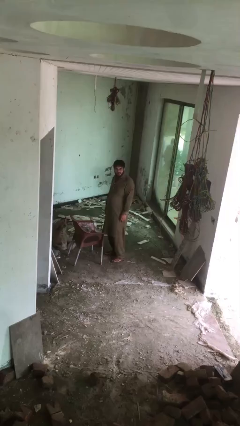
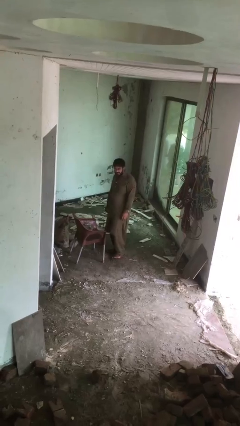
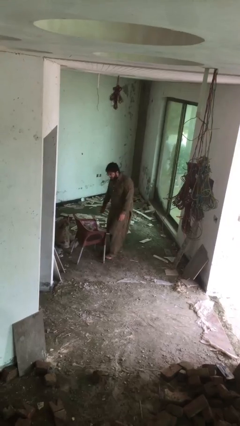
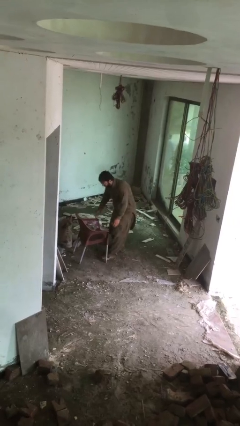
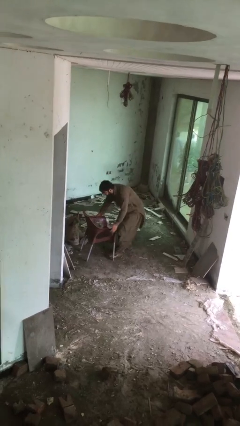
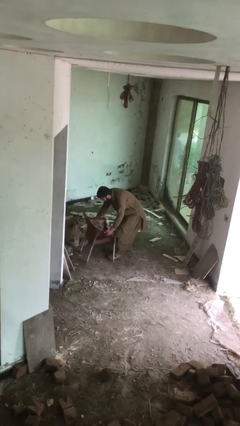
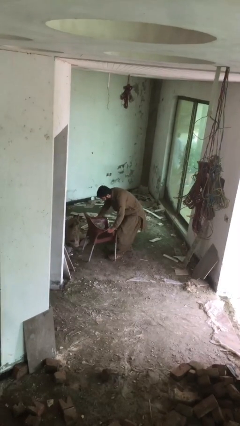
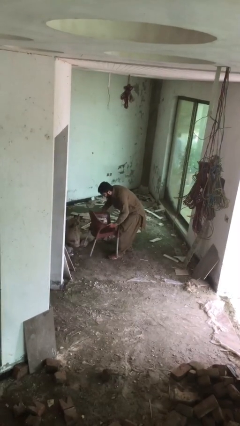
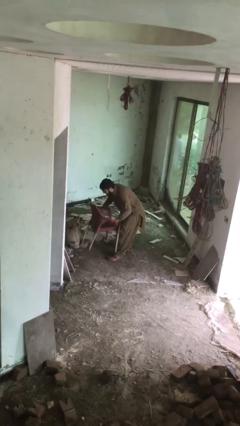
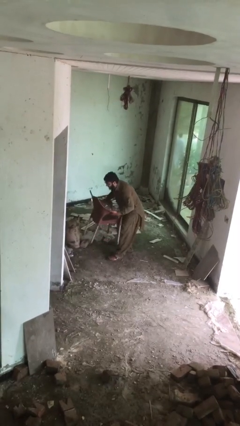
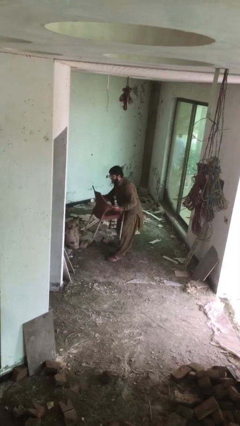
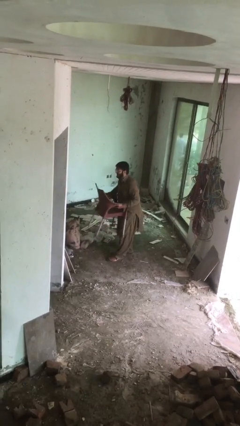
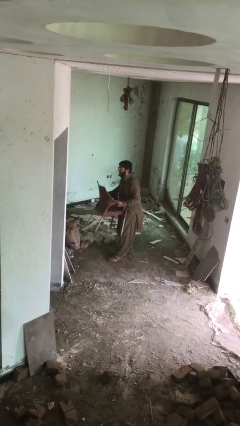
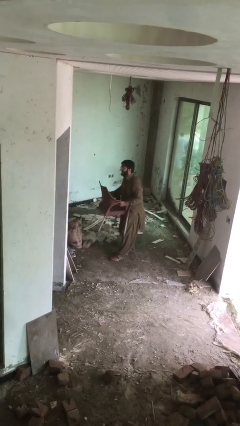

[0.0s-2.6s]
person picks up object from floor

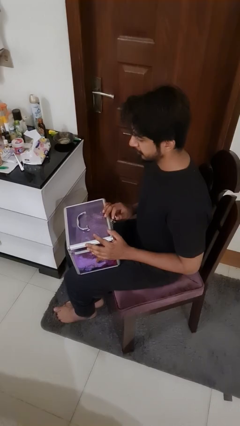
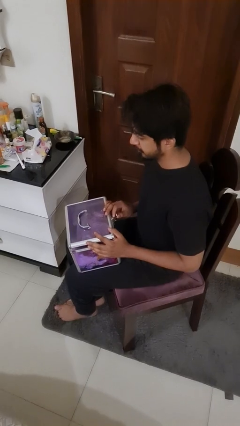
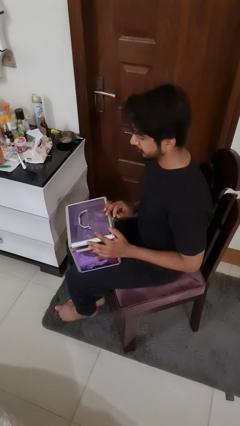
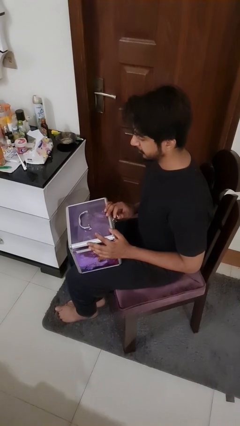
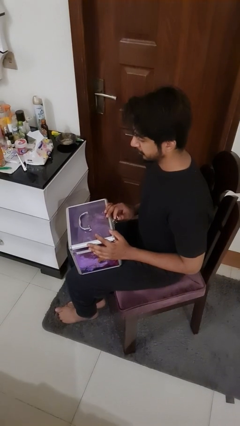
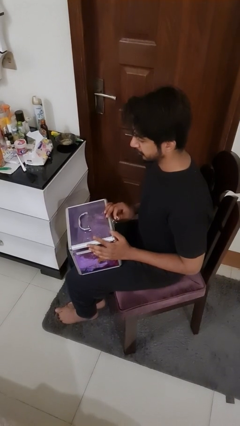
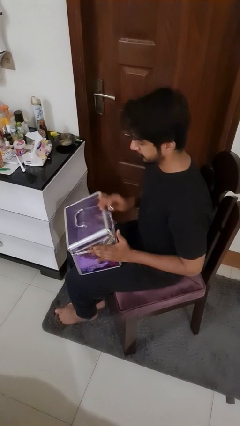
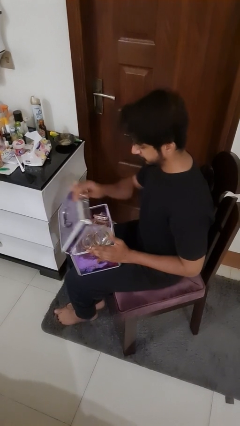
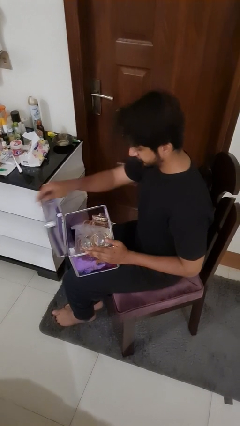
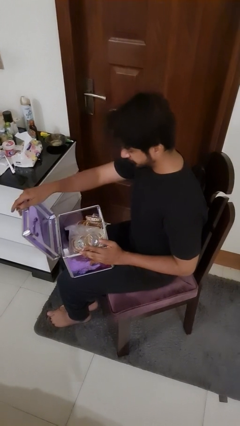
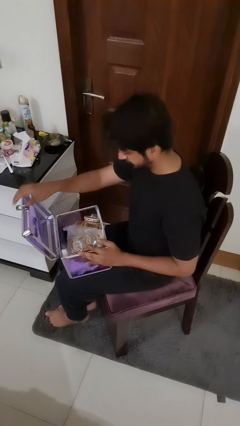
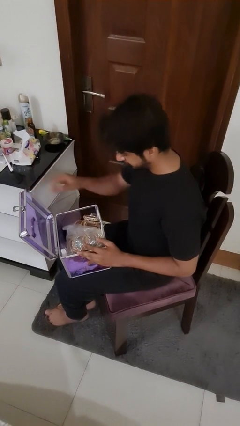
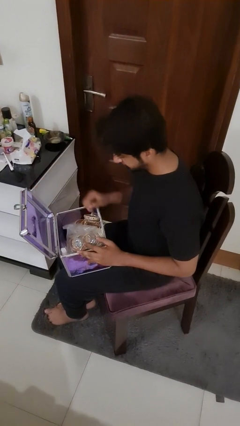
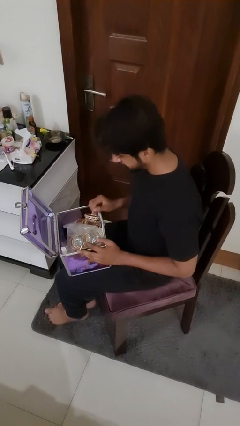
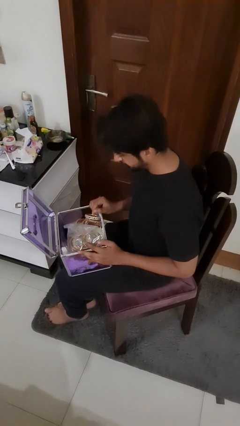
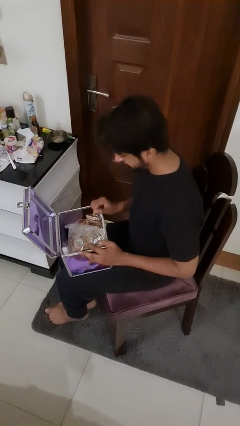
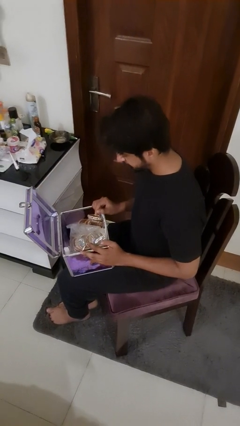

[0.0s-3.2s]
person opens jewelry box

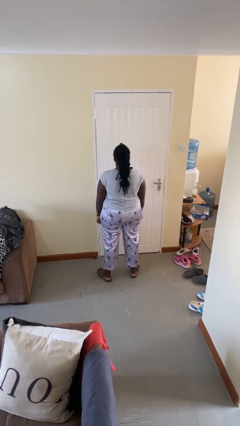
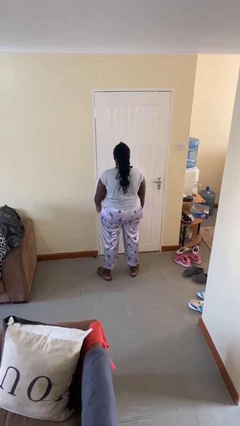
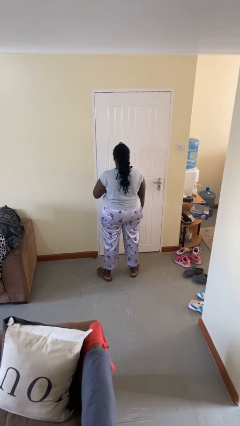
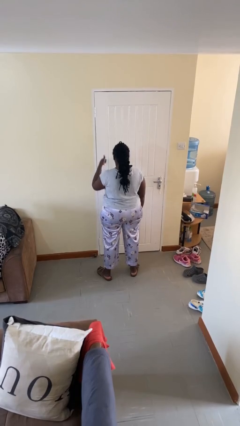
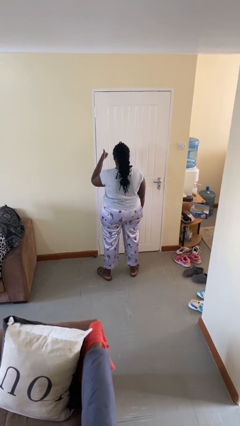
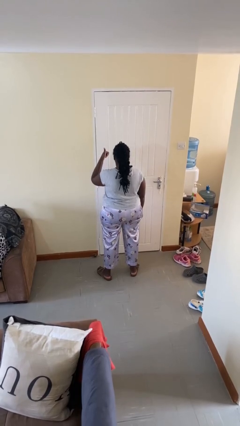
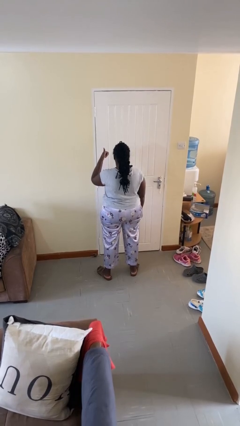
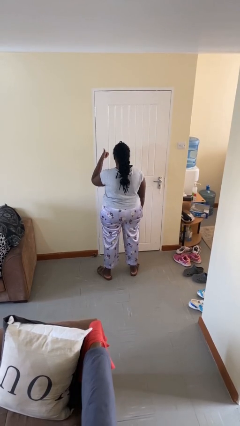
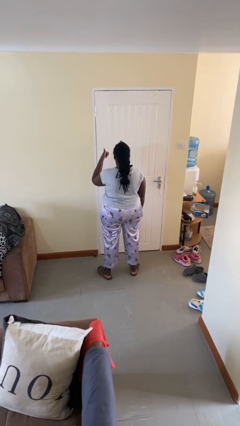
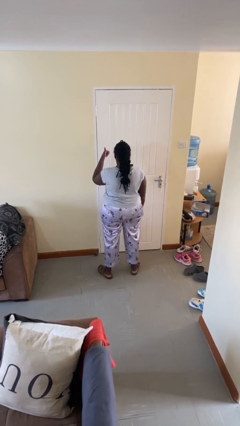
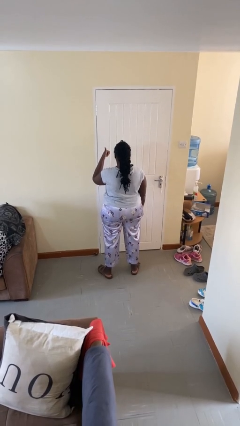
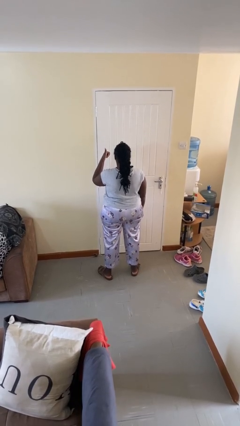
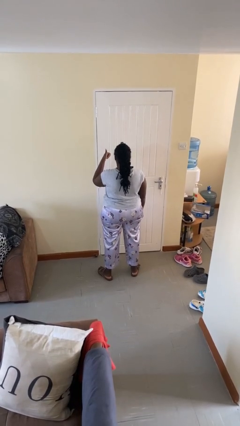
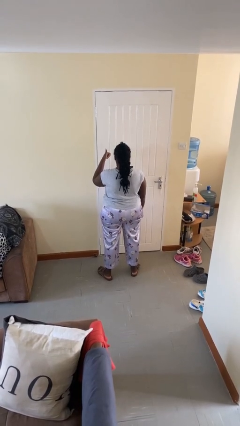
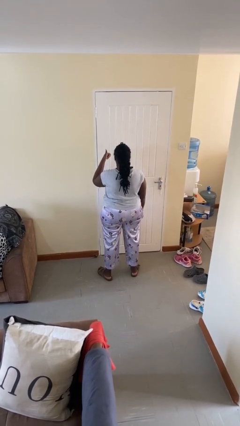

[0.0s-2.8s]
person gestures thumbs up

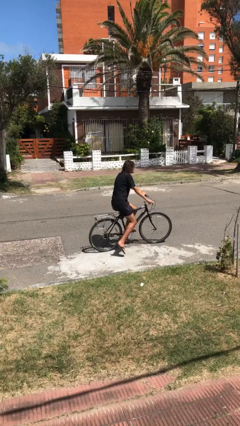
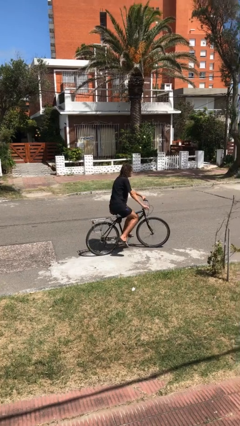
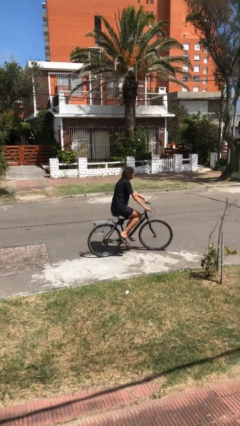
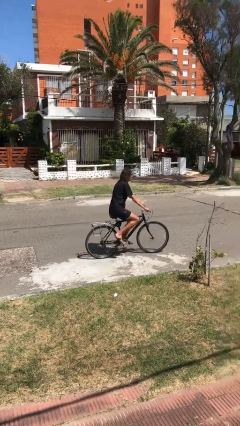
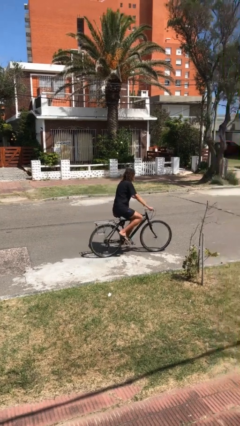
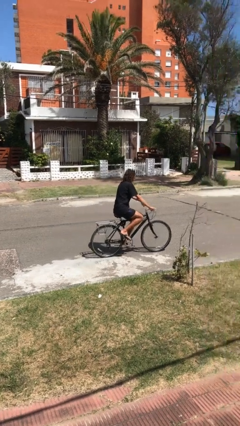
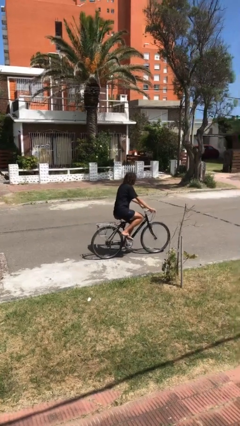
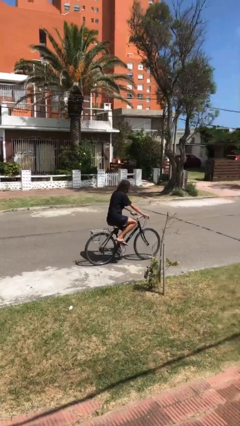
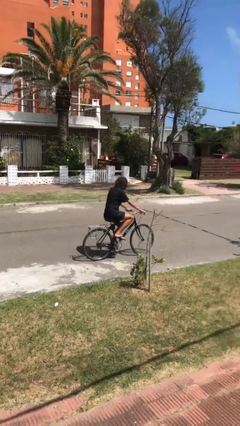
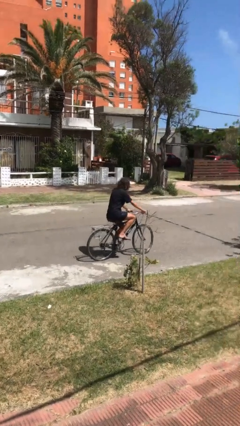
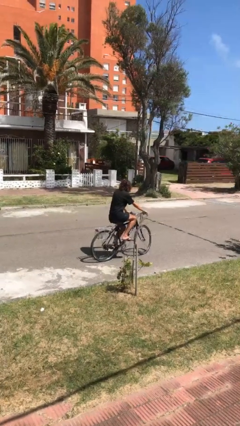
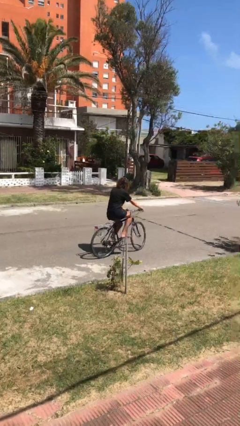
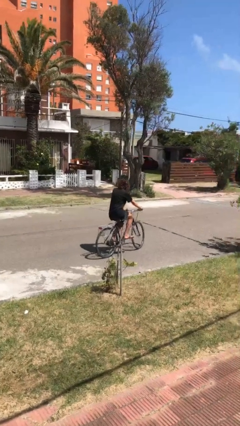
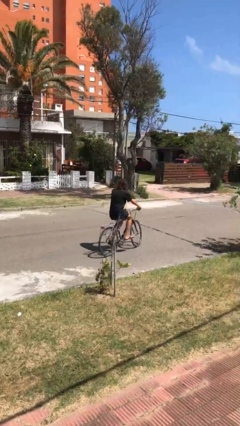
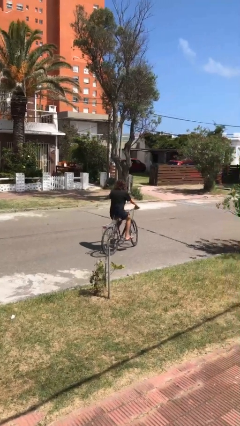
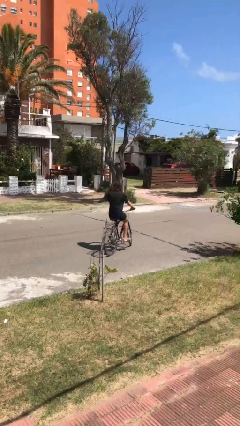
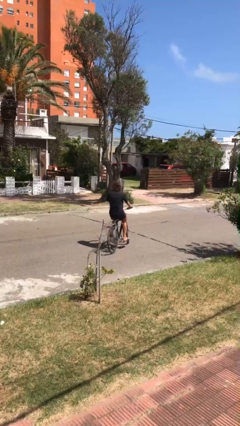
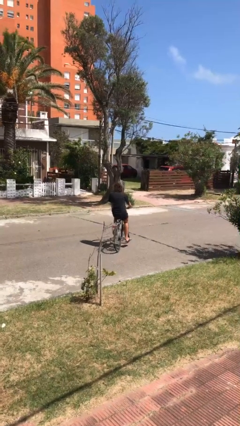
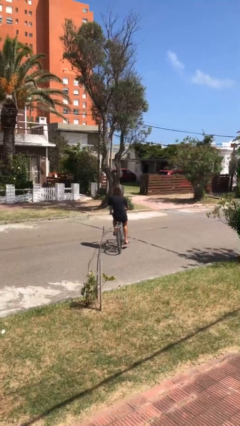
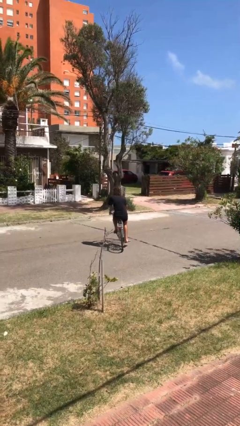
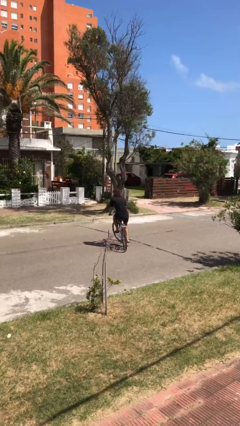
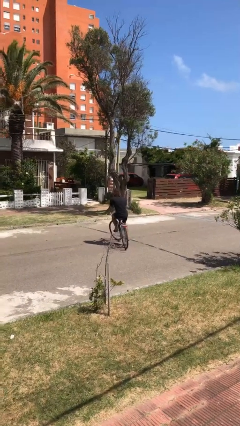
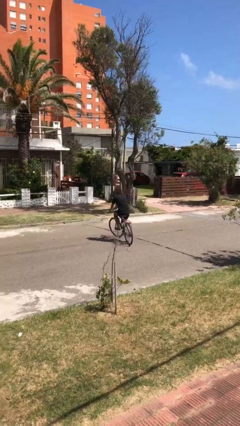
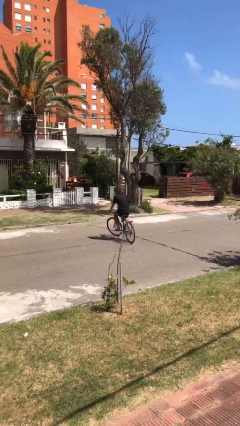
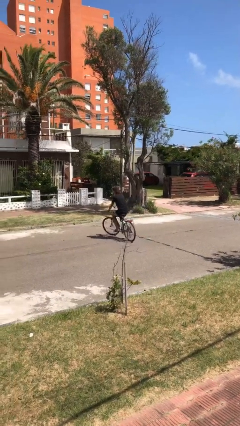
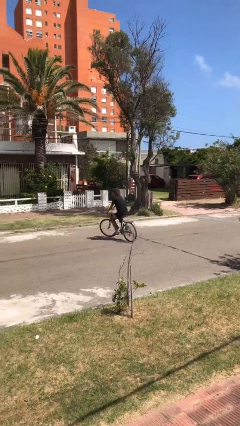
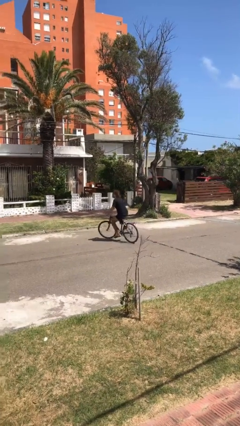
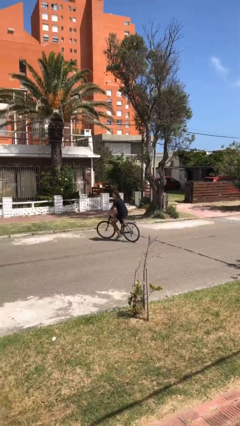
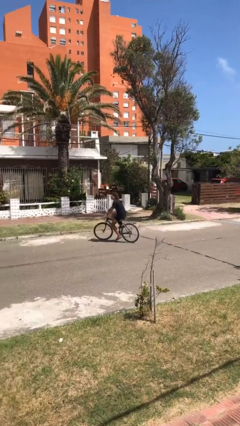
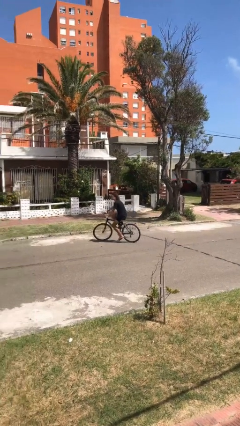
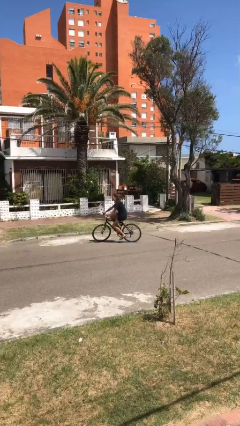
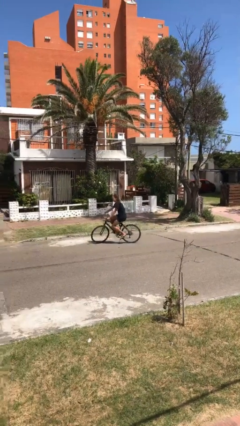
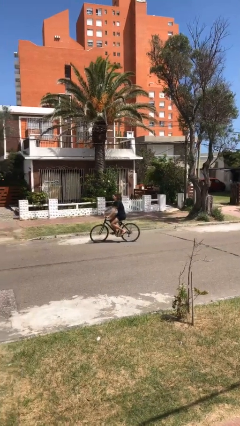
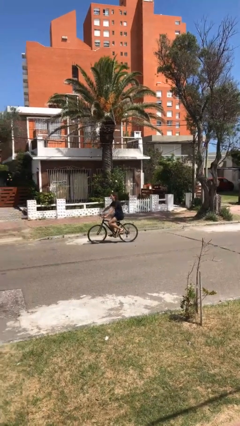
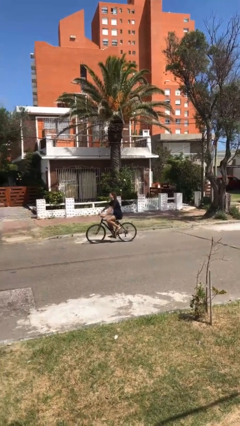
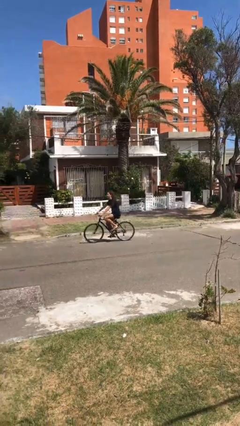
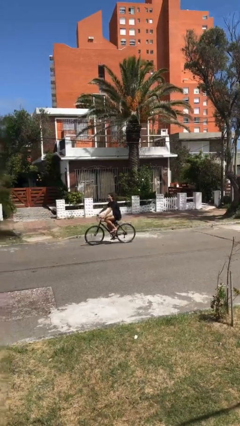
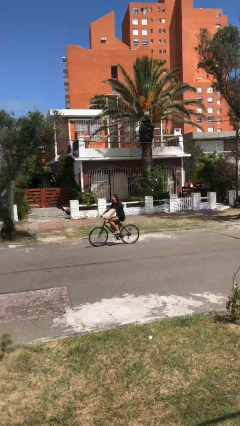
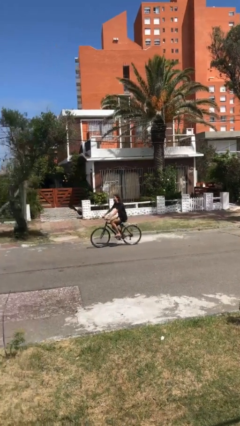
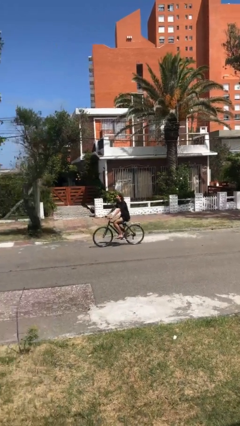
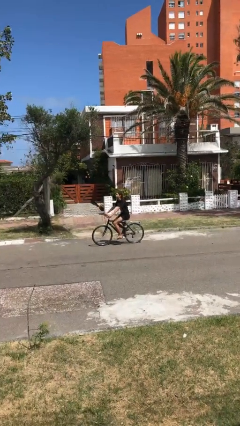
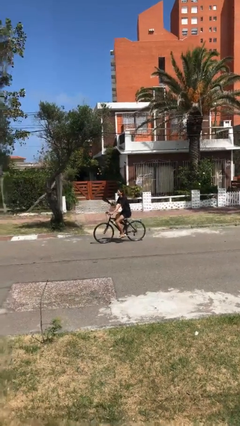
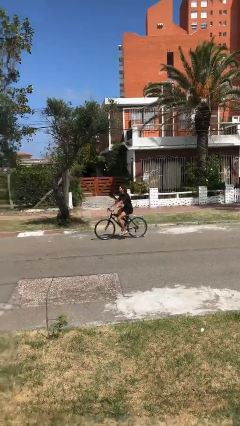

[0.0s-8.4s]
person rides bicycle

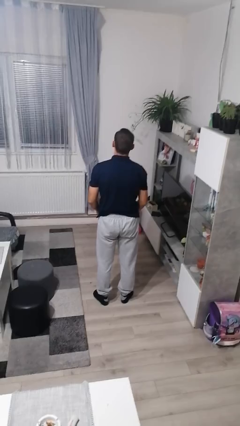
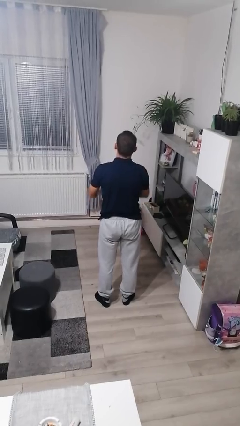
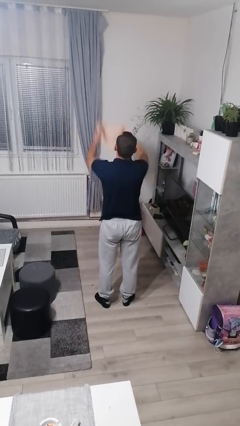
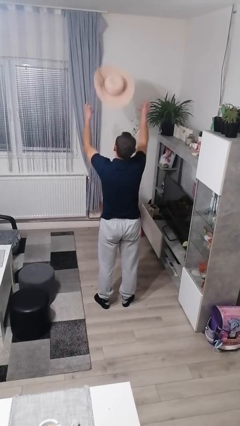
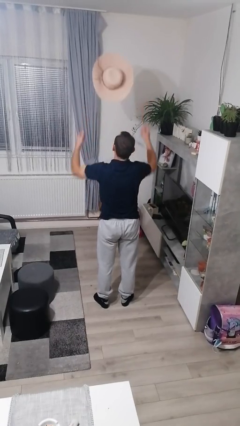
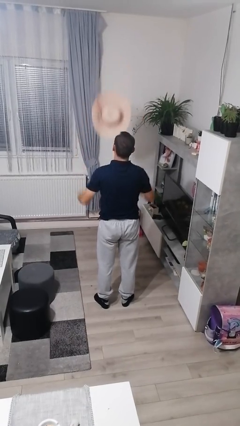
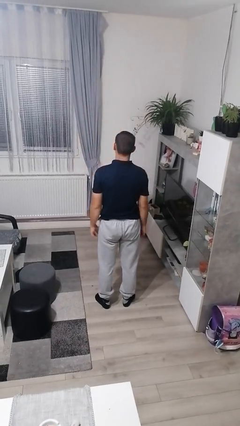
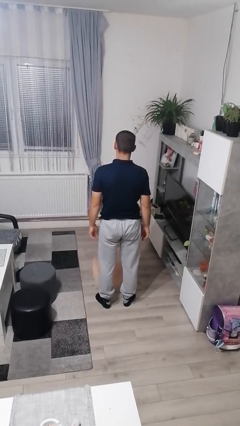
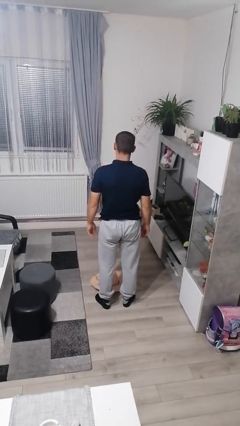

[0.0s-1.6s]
person throws object into air
